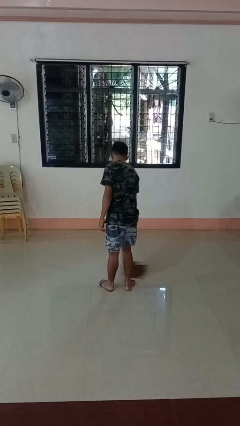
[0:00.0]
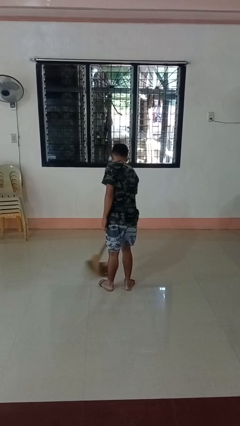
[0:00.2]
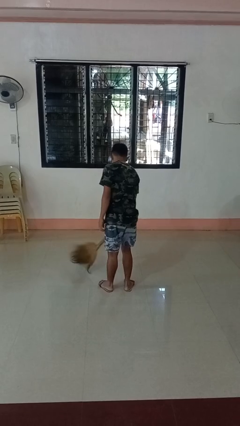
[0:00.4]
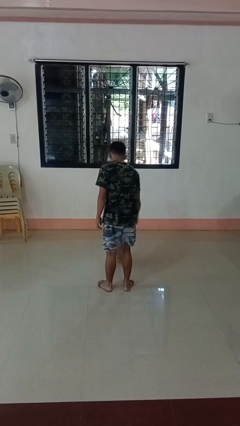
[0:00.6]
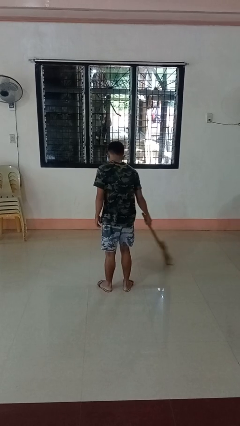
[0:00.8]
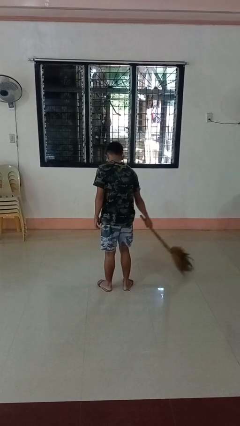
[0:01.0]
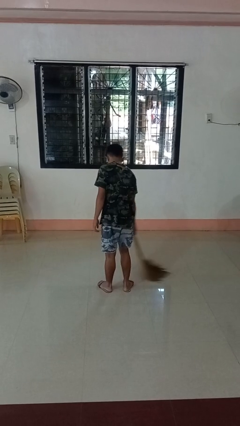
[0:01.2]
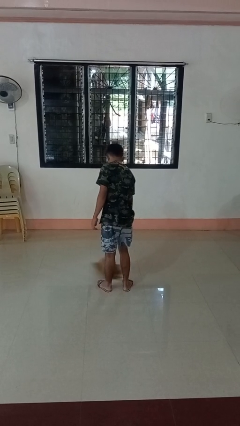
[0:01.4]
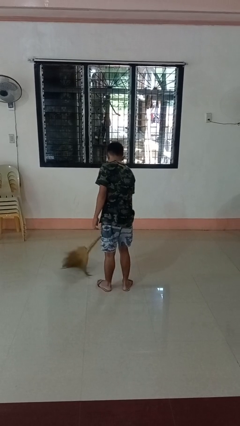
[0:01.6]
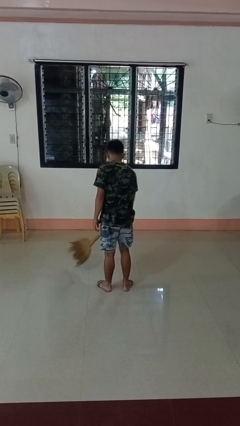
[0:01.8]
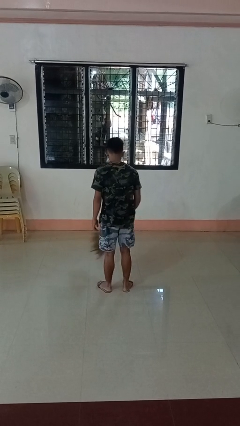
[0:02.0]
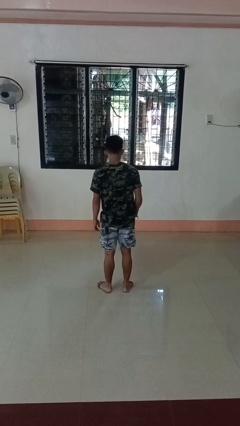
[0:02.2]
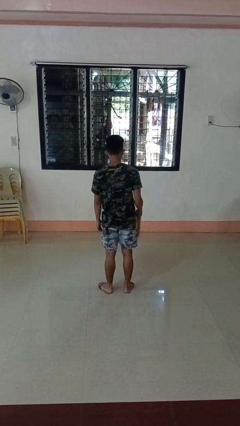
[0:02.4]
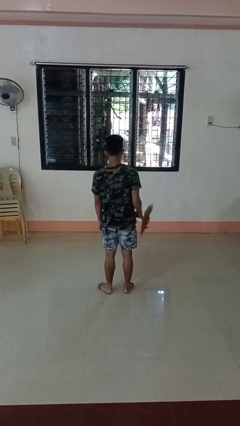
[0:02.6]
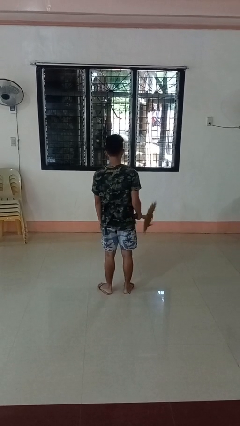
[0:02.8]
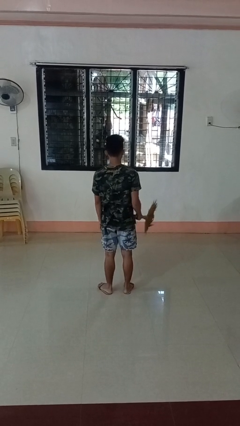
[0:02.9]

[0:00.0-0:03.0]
person sweeps floor

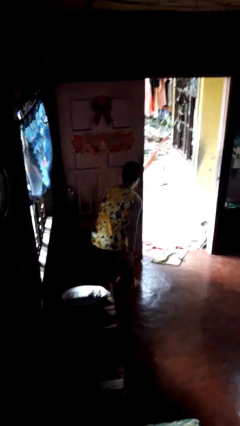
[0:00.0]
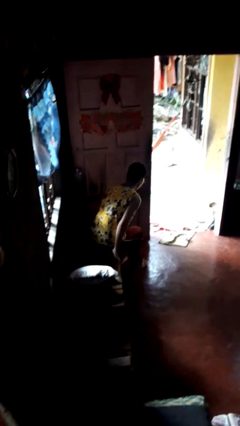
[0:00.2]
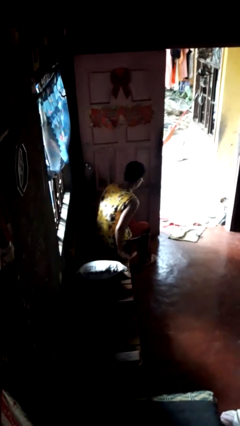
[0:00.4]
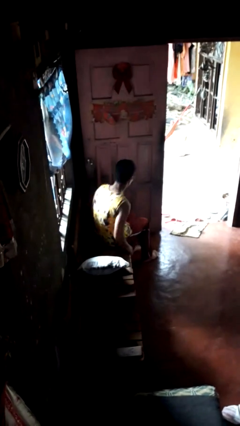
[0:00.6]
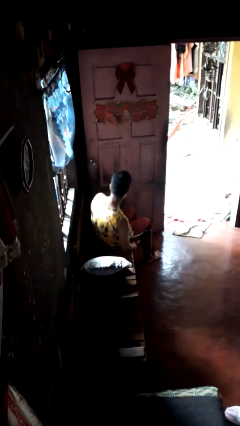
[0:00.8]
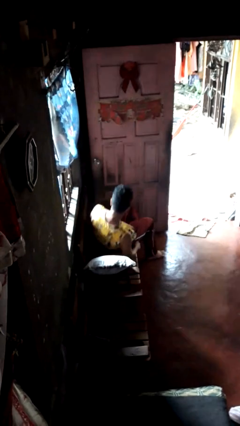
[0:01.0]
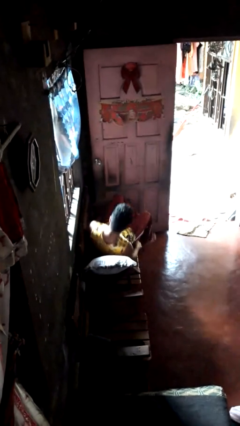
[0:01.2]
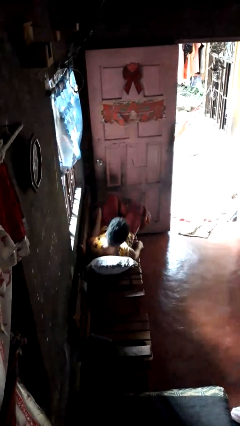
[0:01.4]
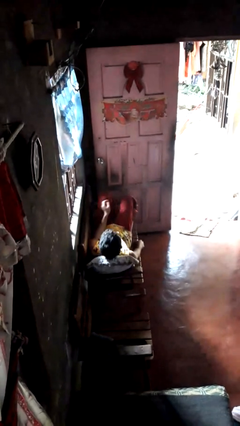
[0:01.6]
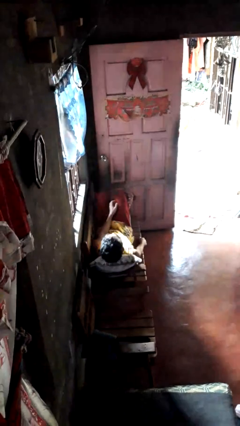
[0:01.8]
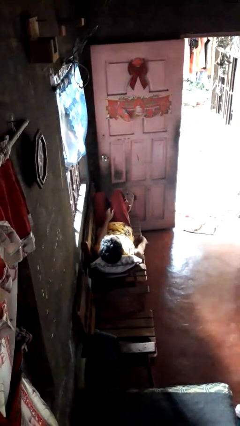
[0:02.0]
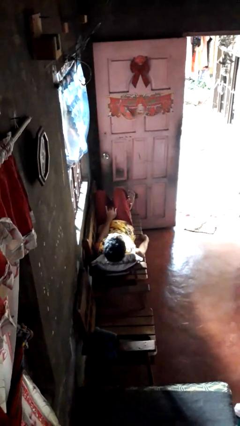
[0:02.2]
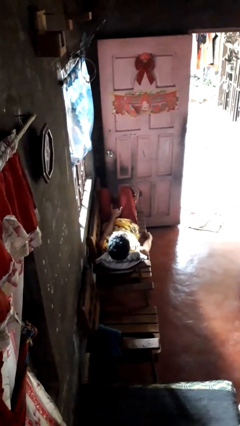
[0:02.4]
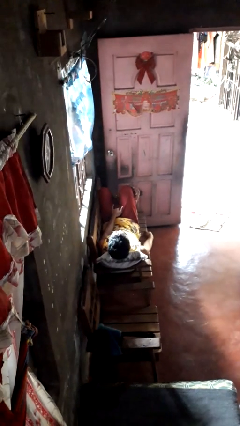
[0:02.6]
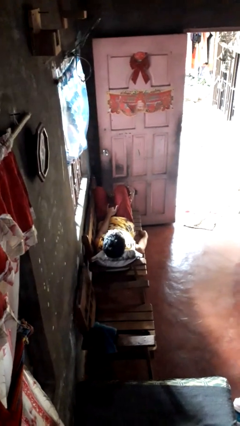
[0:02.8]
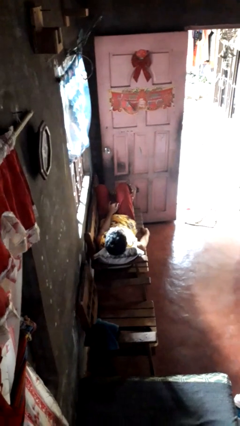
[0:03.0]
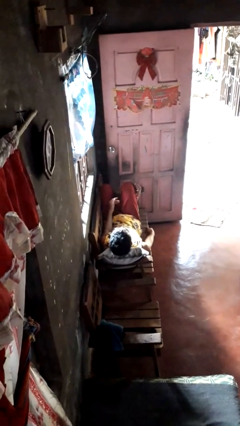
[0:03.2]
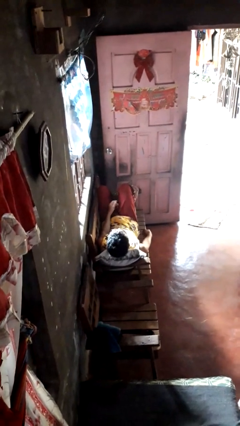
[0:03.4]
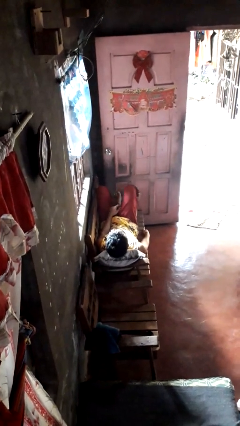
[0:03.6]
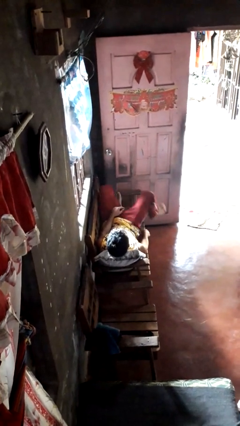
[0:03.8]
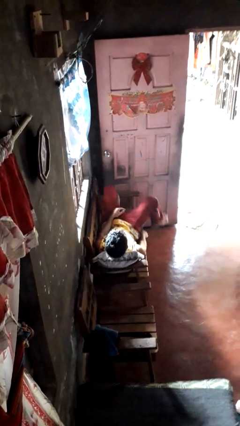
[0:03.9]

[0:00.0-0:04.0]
person lies down on couch

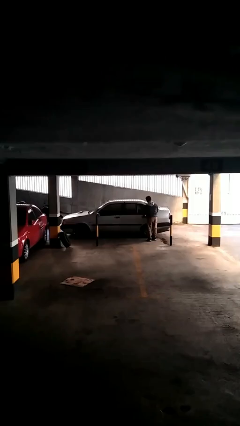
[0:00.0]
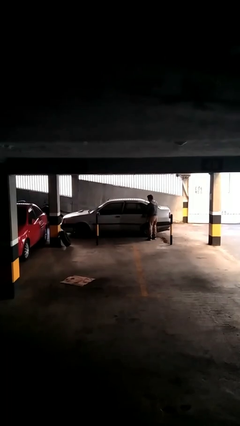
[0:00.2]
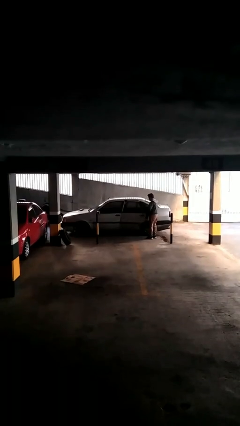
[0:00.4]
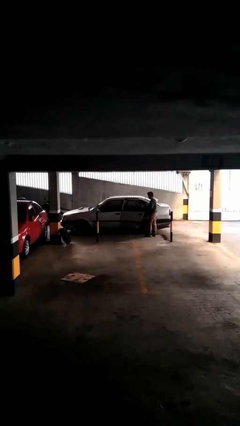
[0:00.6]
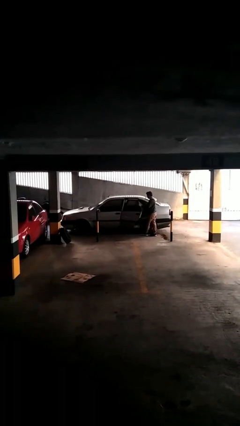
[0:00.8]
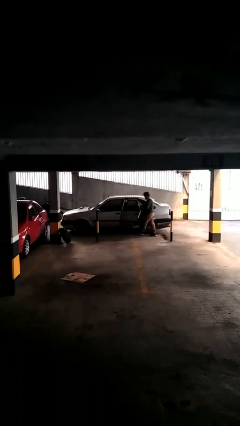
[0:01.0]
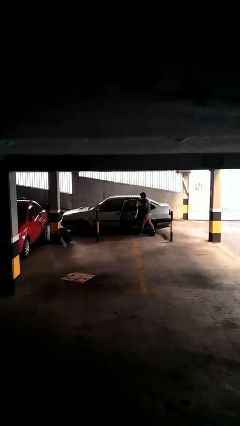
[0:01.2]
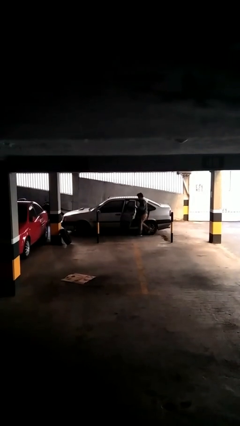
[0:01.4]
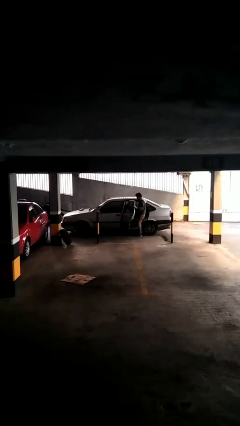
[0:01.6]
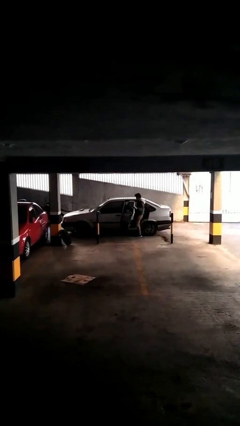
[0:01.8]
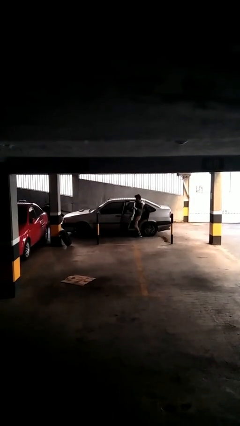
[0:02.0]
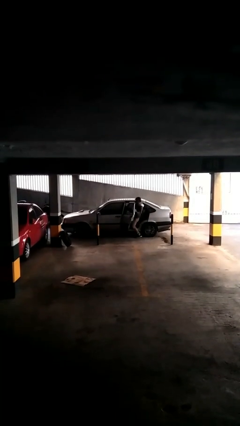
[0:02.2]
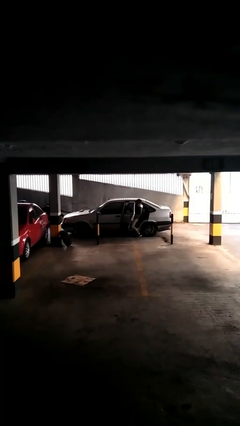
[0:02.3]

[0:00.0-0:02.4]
car picks up person

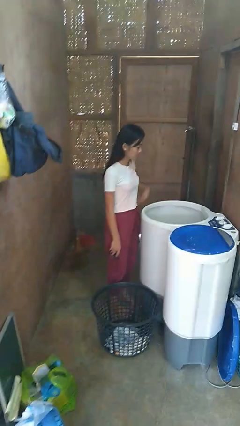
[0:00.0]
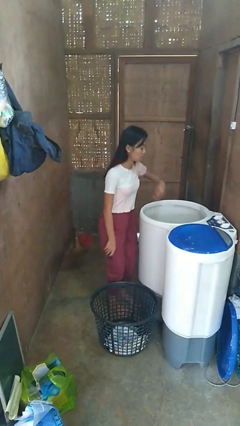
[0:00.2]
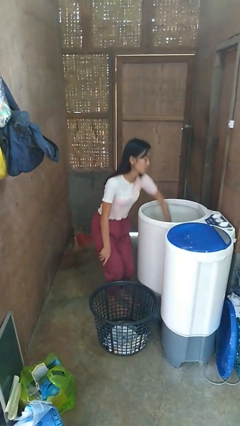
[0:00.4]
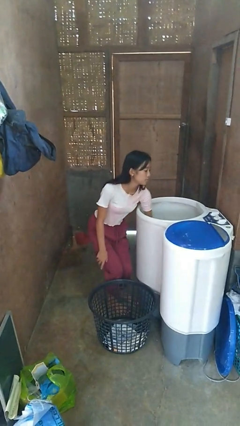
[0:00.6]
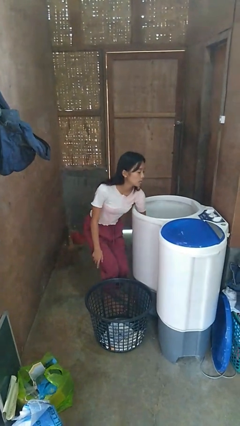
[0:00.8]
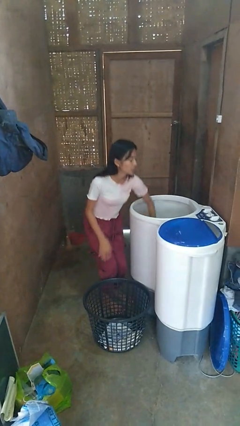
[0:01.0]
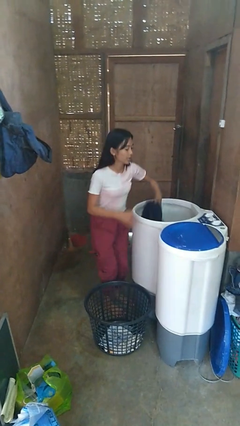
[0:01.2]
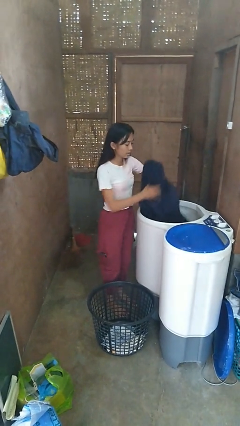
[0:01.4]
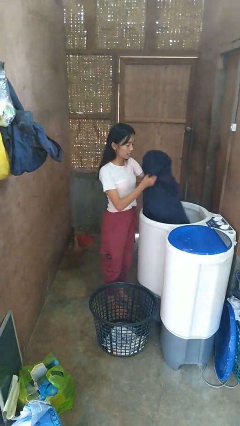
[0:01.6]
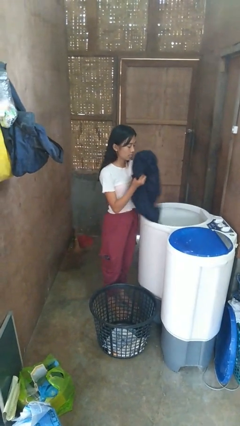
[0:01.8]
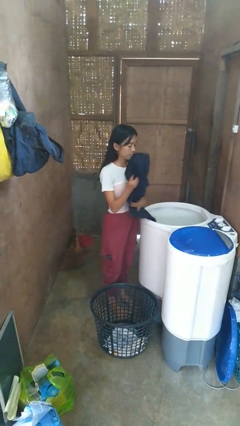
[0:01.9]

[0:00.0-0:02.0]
person unloads clotheswasher

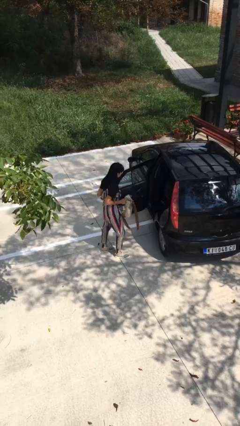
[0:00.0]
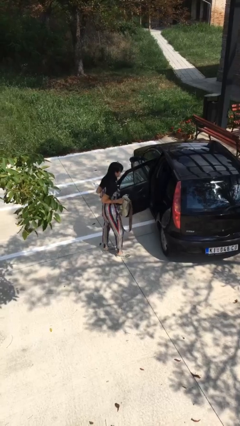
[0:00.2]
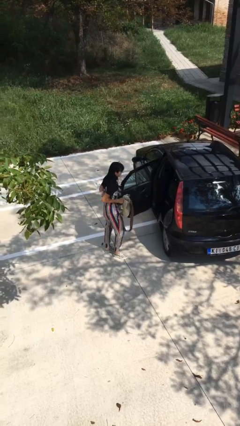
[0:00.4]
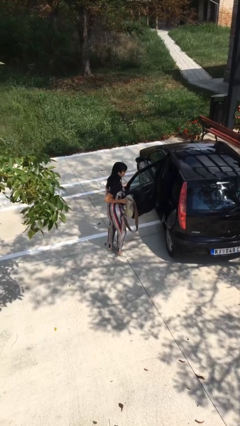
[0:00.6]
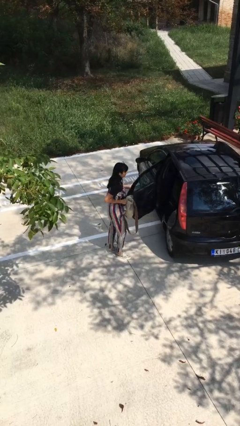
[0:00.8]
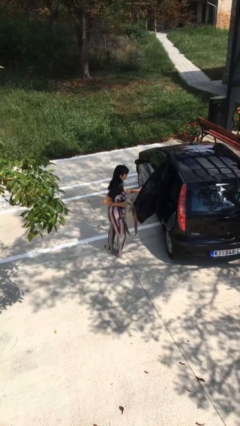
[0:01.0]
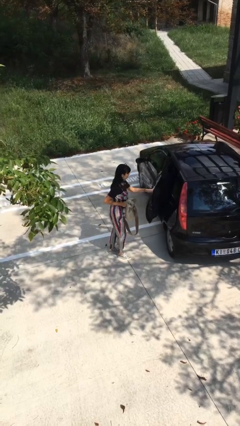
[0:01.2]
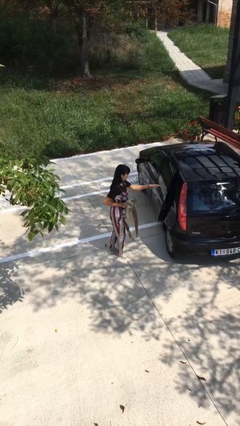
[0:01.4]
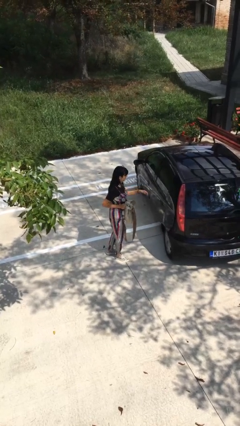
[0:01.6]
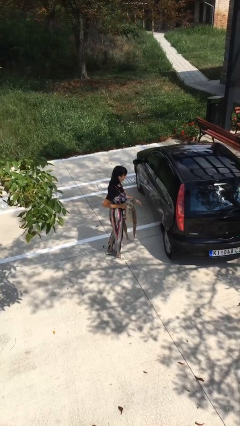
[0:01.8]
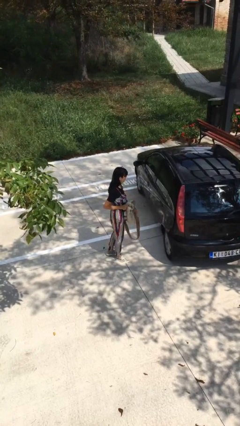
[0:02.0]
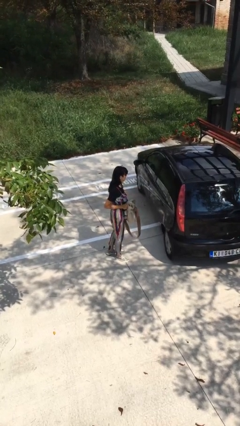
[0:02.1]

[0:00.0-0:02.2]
person closes car door

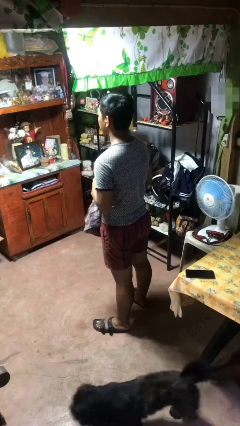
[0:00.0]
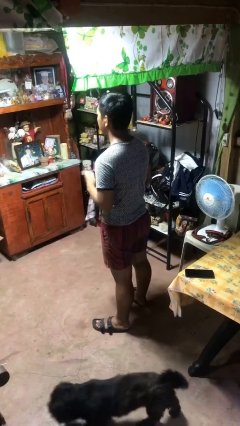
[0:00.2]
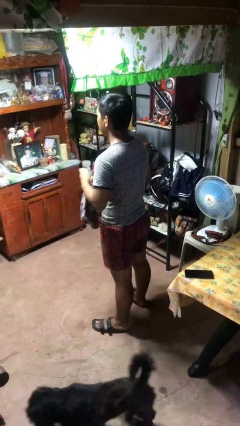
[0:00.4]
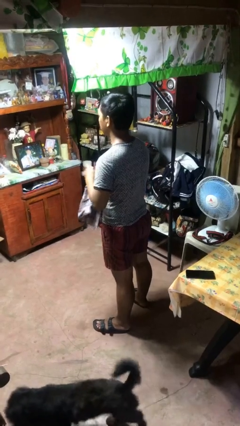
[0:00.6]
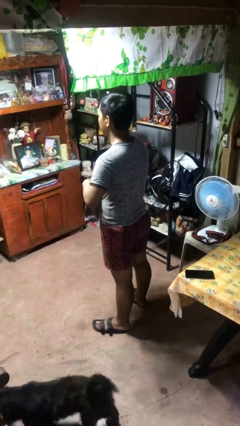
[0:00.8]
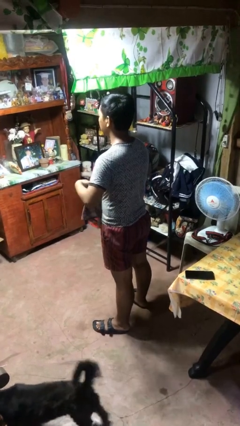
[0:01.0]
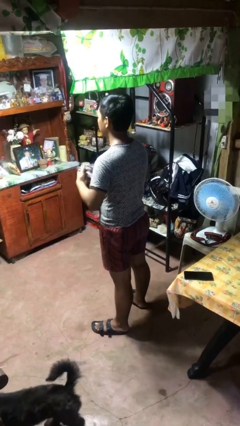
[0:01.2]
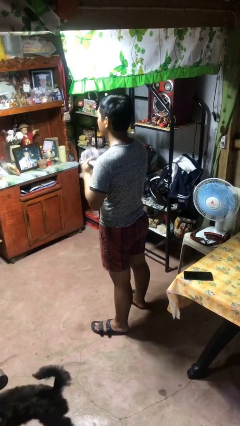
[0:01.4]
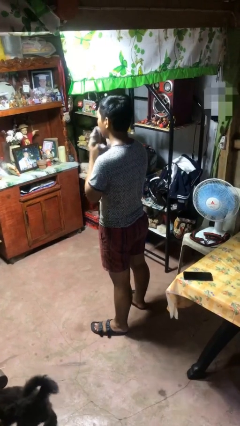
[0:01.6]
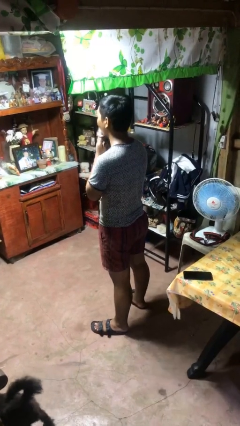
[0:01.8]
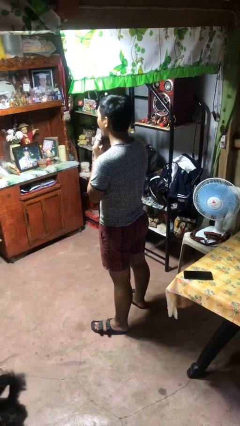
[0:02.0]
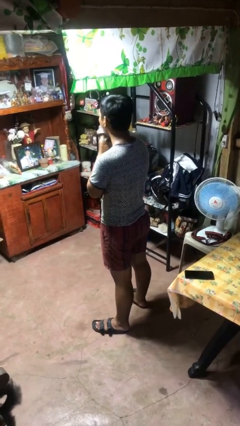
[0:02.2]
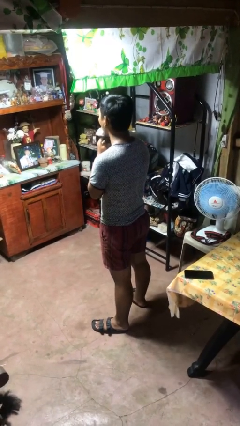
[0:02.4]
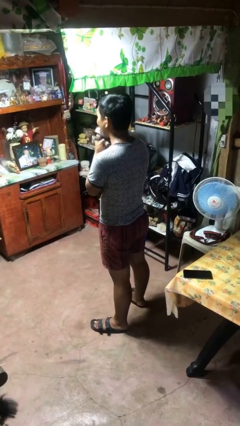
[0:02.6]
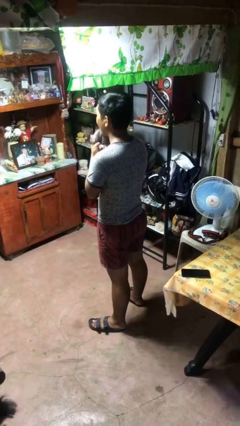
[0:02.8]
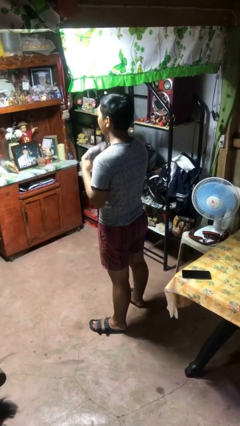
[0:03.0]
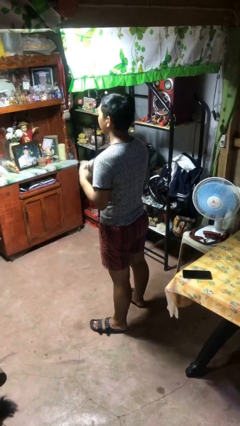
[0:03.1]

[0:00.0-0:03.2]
person wipes mouth with napkin

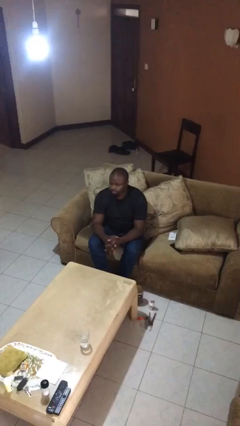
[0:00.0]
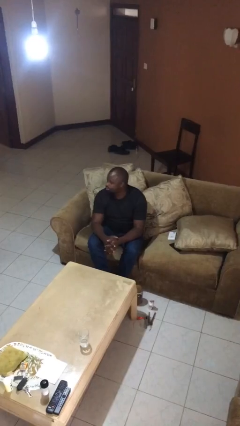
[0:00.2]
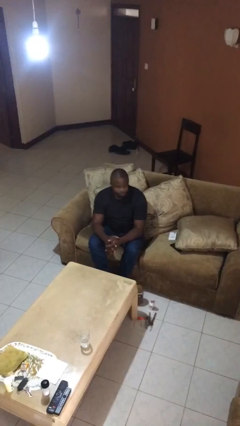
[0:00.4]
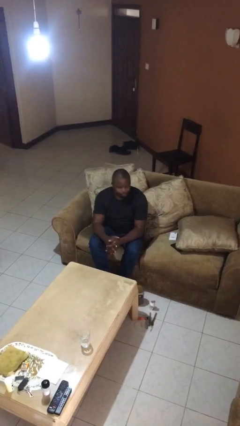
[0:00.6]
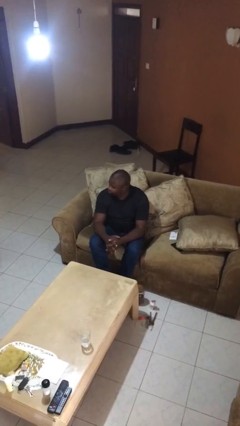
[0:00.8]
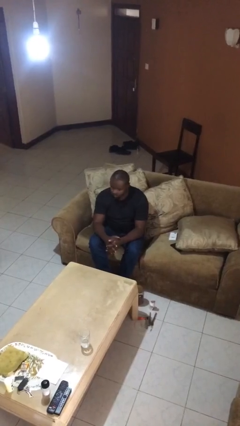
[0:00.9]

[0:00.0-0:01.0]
person shakes head
